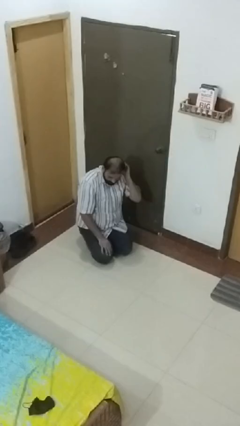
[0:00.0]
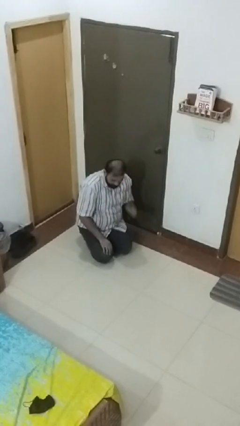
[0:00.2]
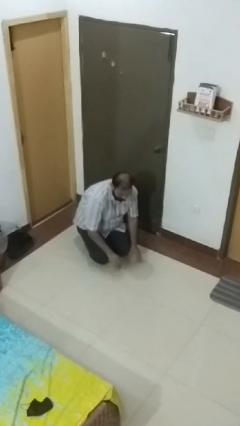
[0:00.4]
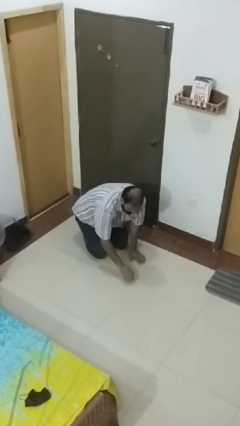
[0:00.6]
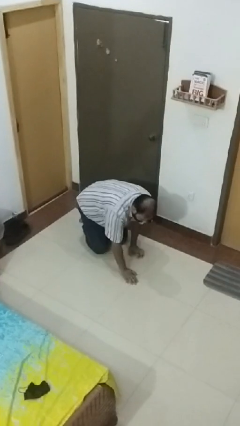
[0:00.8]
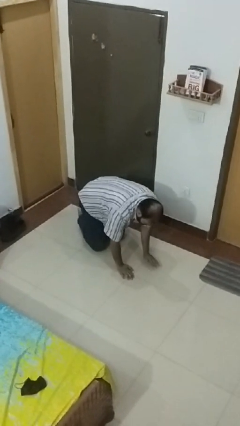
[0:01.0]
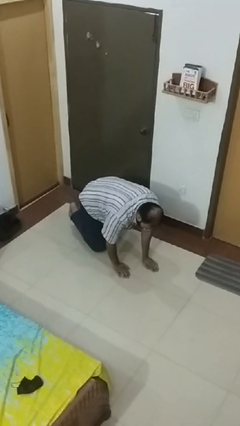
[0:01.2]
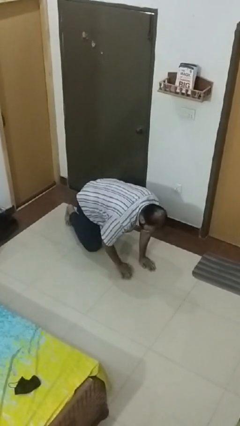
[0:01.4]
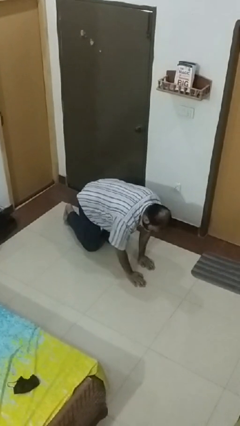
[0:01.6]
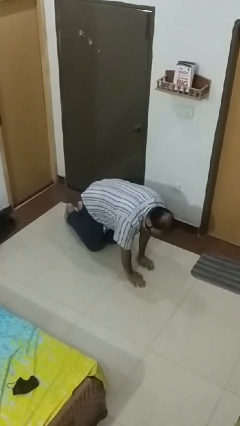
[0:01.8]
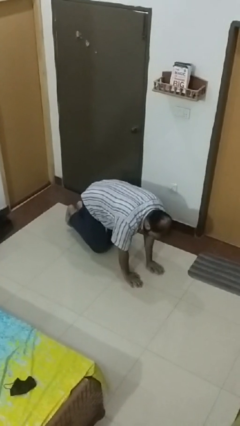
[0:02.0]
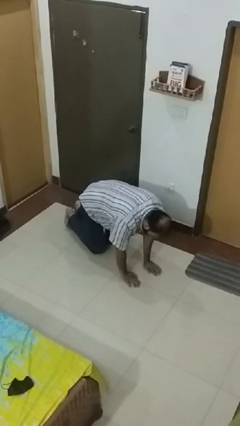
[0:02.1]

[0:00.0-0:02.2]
person crawls

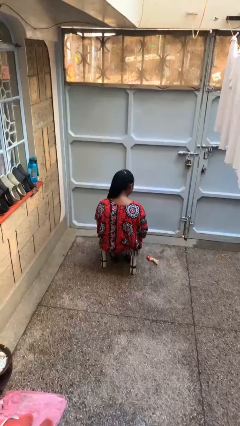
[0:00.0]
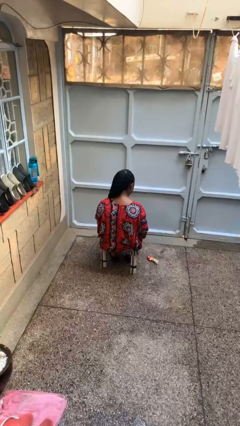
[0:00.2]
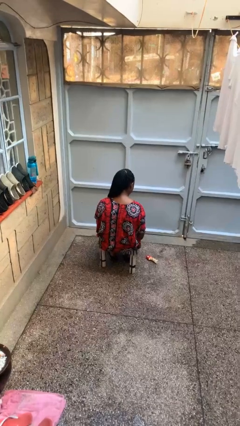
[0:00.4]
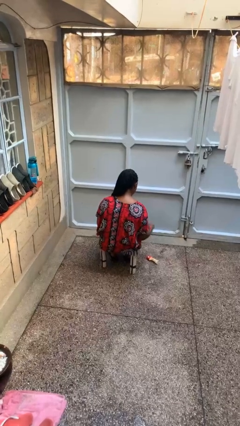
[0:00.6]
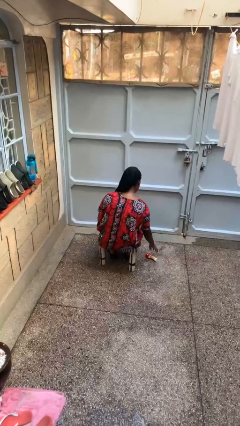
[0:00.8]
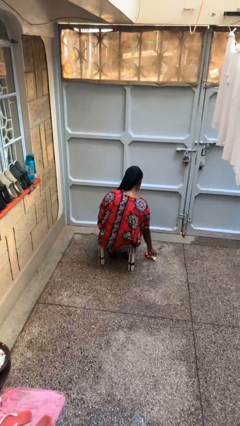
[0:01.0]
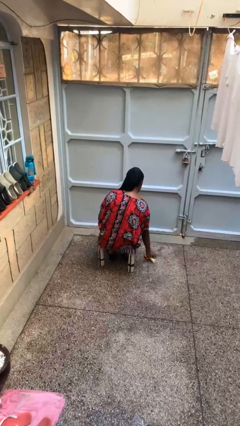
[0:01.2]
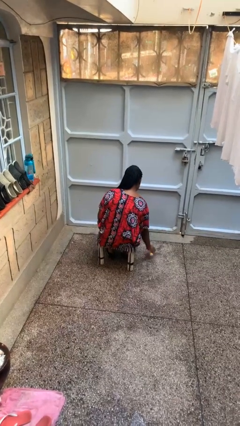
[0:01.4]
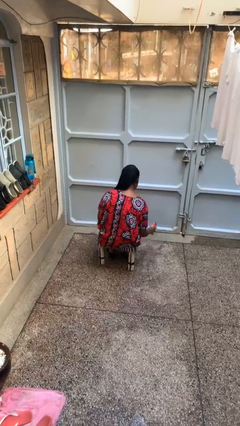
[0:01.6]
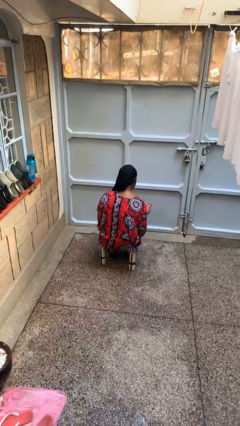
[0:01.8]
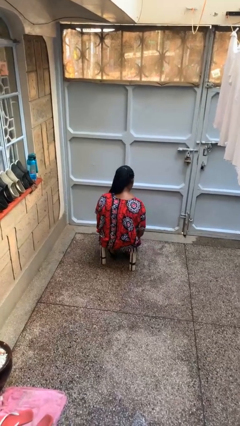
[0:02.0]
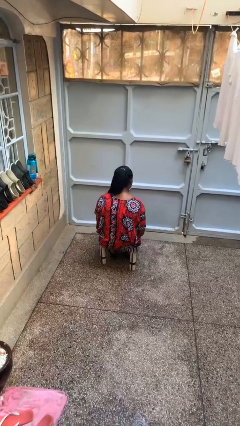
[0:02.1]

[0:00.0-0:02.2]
person picks up object from floor

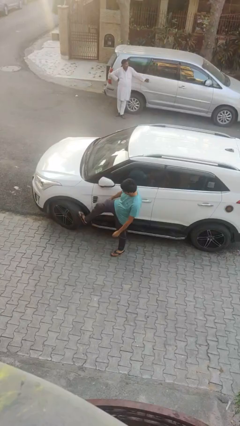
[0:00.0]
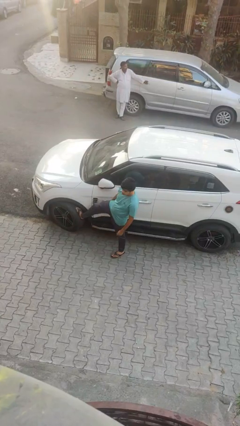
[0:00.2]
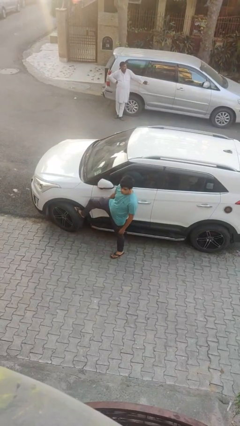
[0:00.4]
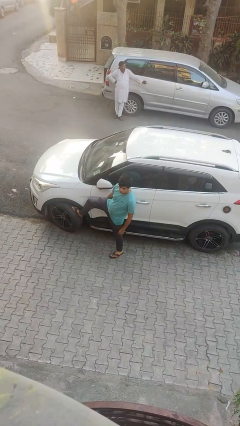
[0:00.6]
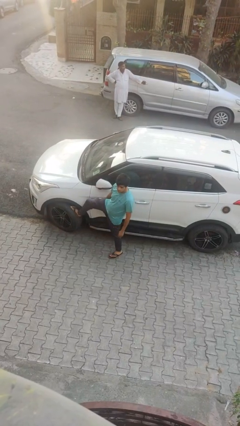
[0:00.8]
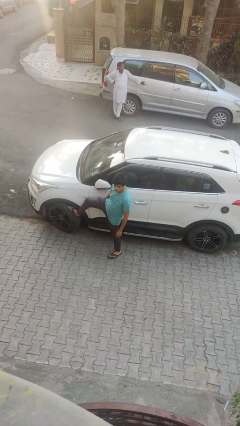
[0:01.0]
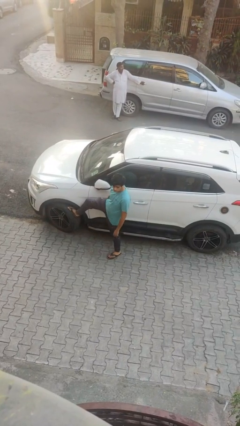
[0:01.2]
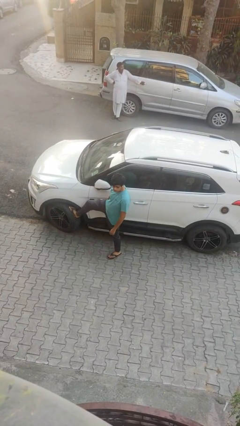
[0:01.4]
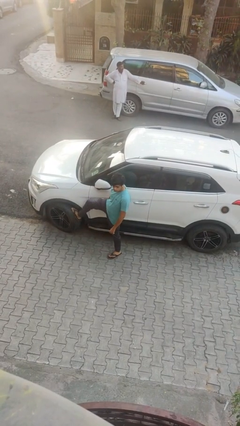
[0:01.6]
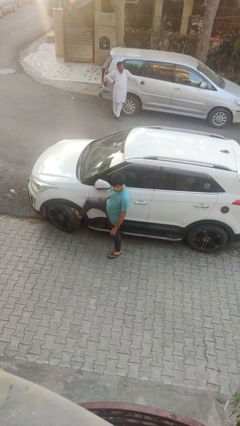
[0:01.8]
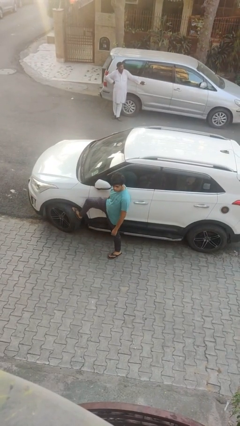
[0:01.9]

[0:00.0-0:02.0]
person kicks car tires

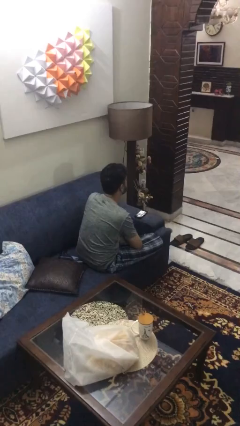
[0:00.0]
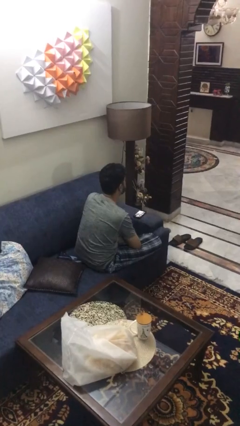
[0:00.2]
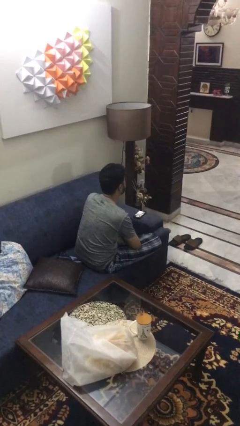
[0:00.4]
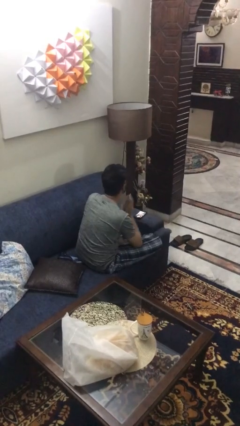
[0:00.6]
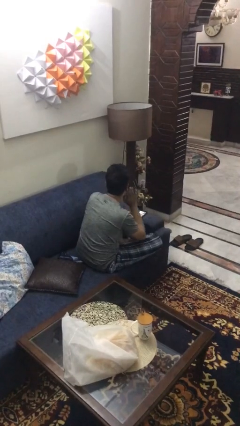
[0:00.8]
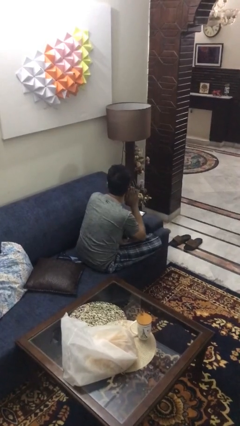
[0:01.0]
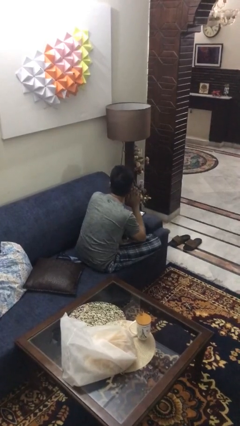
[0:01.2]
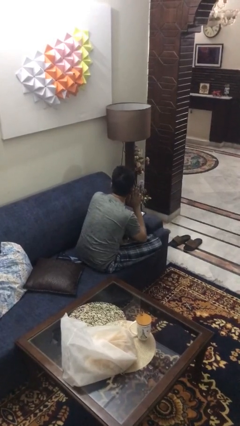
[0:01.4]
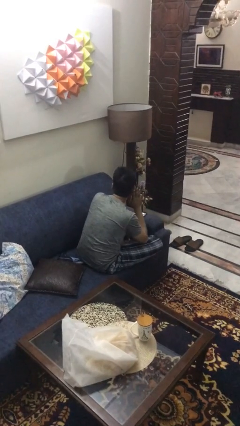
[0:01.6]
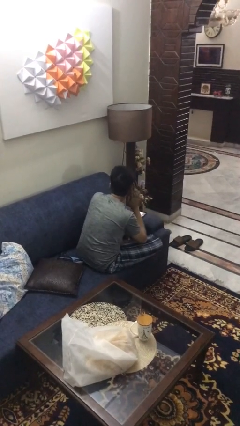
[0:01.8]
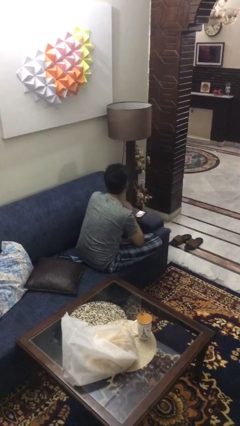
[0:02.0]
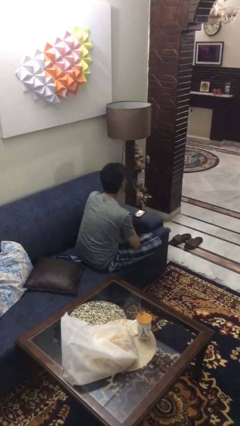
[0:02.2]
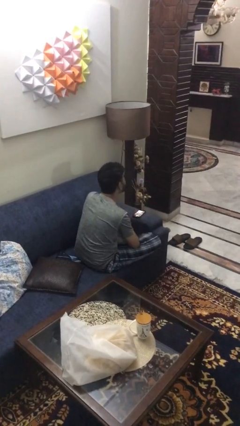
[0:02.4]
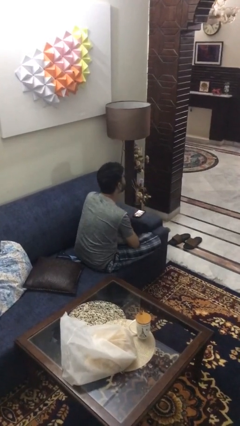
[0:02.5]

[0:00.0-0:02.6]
person gestures listen closely

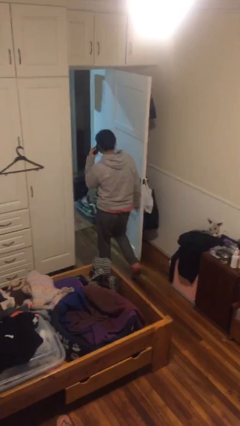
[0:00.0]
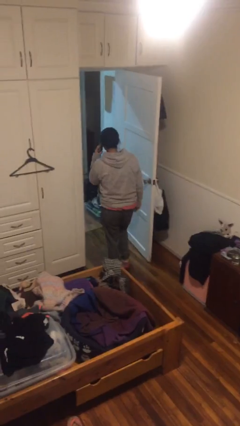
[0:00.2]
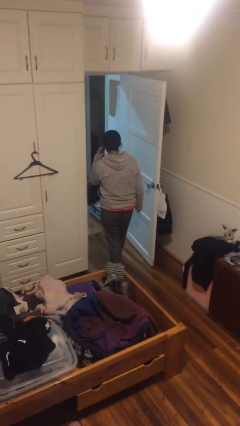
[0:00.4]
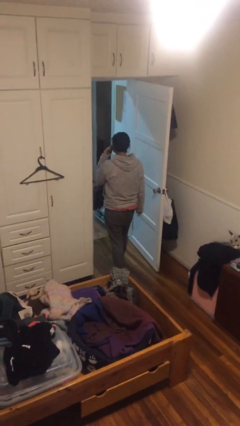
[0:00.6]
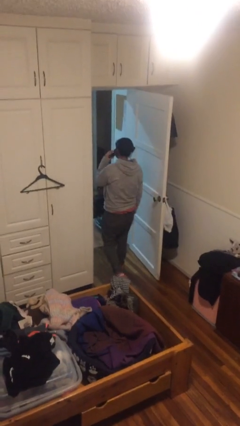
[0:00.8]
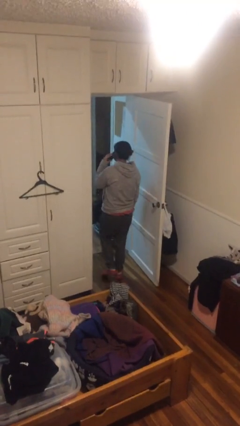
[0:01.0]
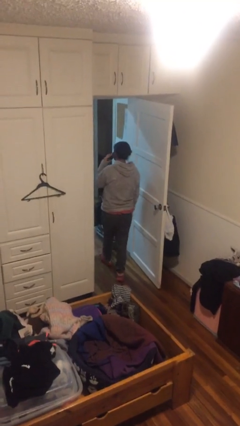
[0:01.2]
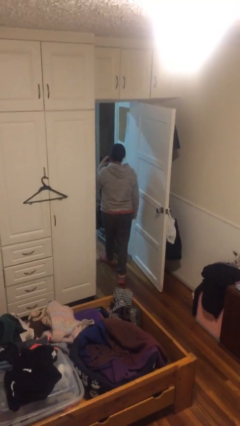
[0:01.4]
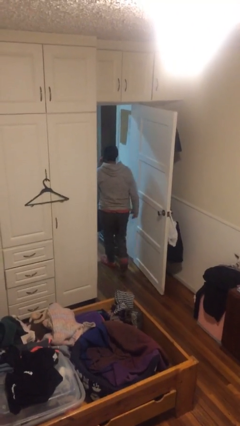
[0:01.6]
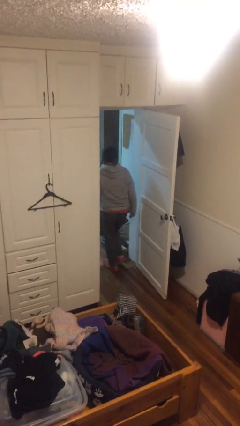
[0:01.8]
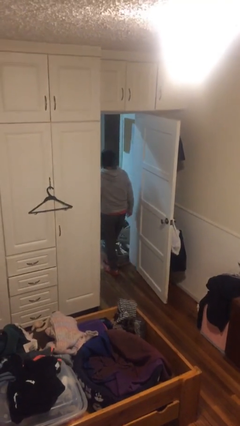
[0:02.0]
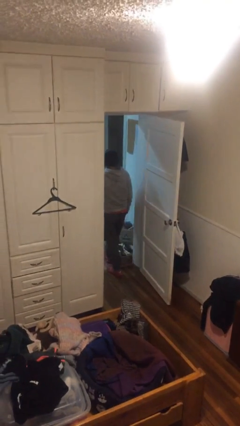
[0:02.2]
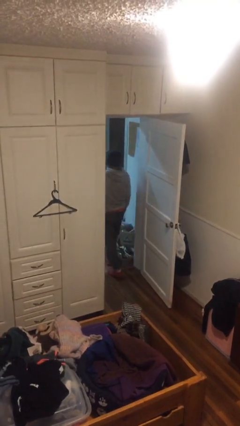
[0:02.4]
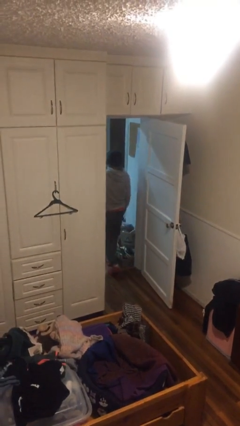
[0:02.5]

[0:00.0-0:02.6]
person exits scene through structure

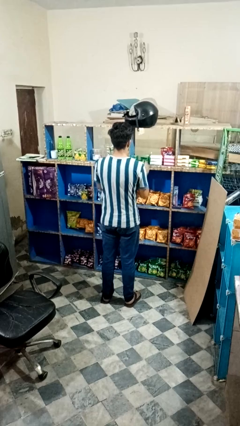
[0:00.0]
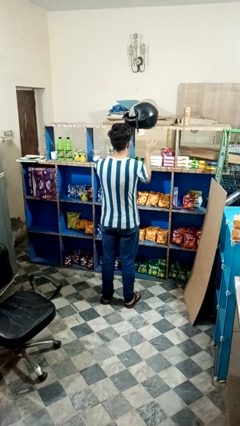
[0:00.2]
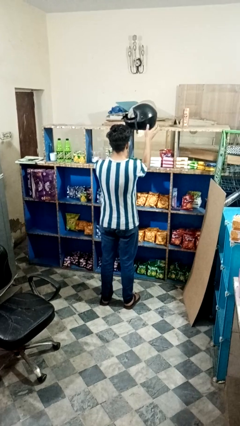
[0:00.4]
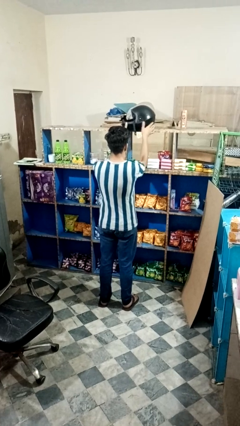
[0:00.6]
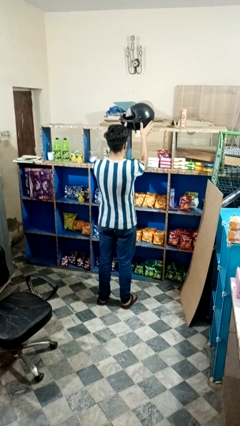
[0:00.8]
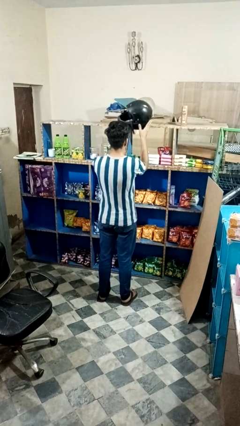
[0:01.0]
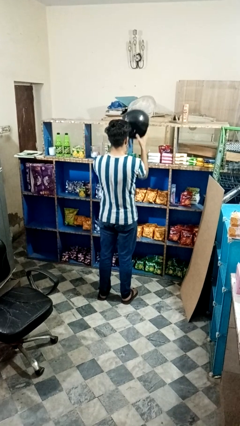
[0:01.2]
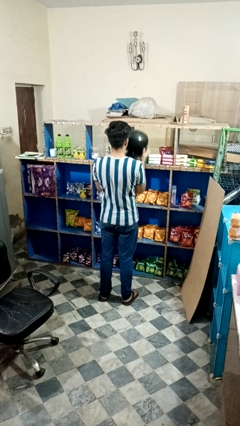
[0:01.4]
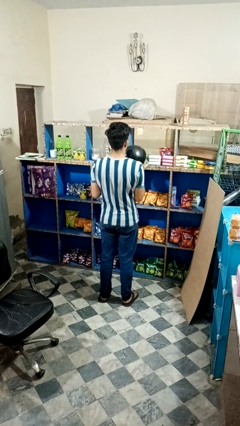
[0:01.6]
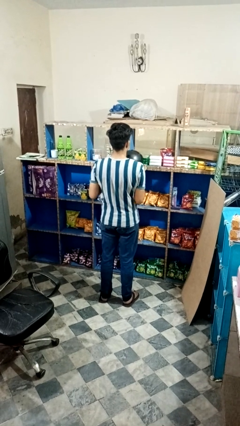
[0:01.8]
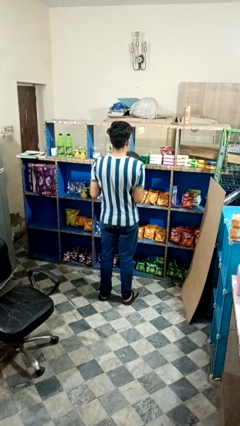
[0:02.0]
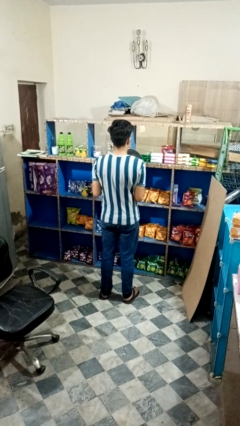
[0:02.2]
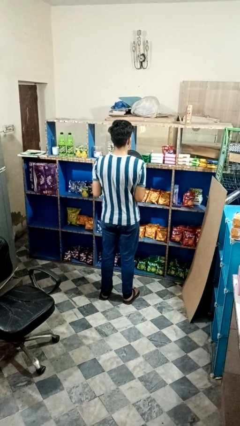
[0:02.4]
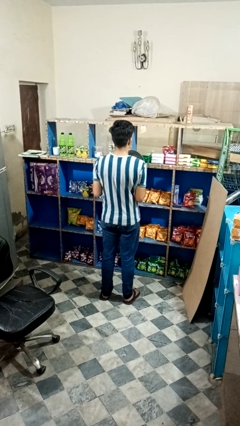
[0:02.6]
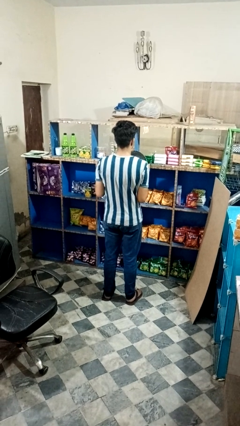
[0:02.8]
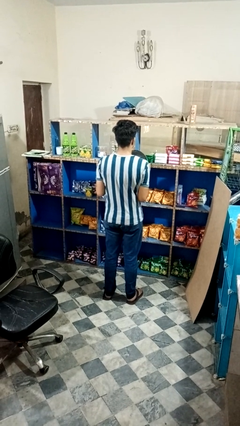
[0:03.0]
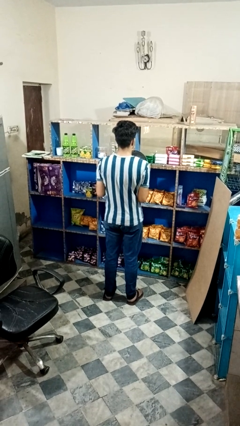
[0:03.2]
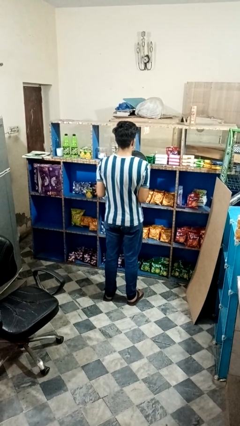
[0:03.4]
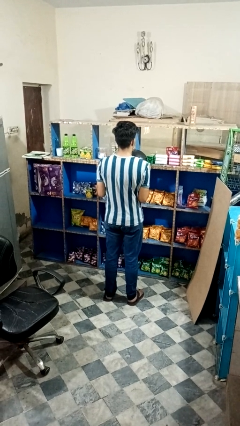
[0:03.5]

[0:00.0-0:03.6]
person picks up object from countertop

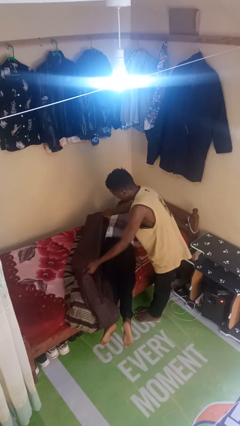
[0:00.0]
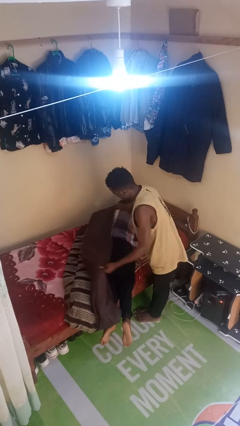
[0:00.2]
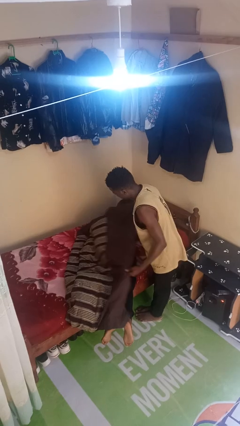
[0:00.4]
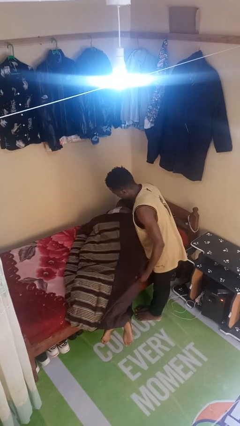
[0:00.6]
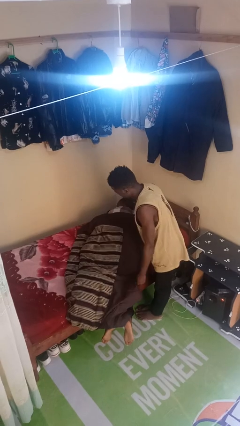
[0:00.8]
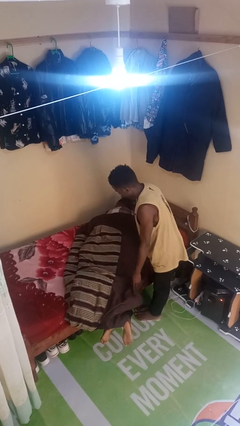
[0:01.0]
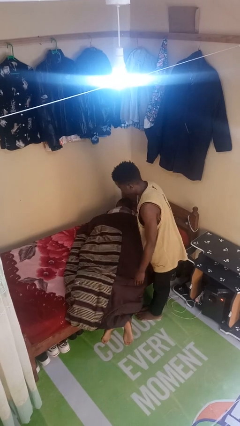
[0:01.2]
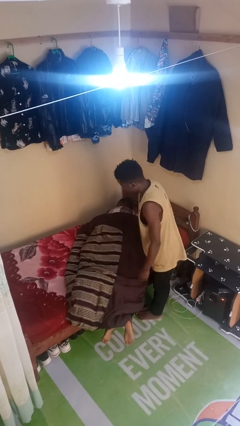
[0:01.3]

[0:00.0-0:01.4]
person covers friend with blanket

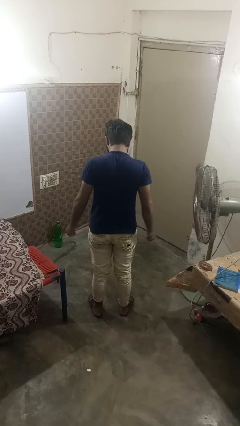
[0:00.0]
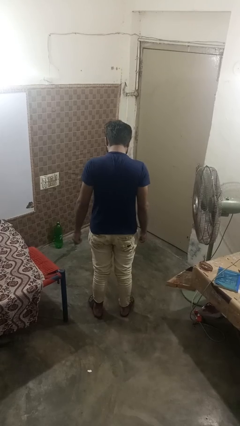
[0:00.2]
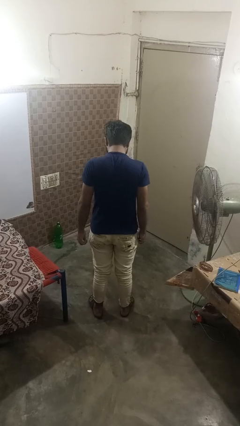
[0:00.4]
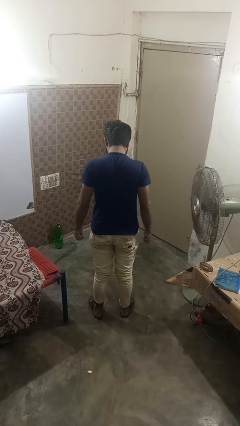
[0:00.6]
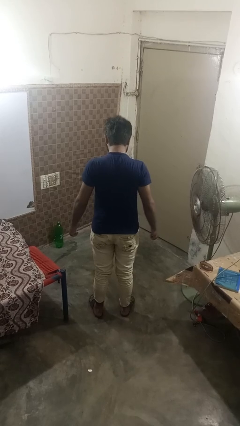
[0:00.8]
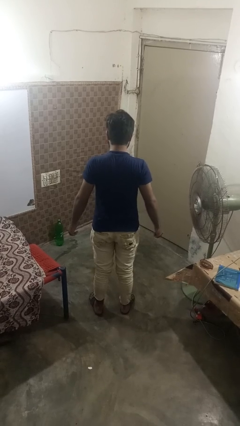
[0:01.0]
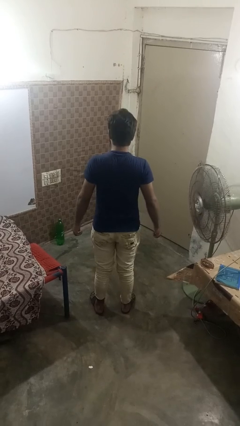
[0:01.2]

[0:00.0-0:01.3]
person stretches back
